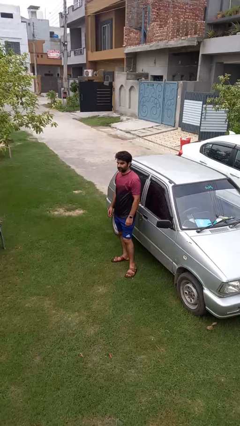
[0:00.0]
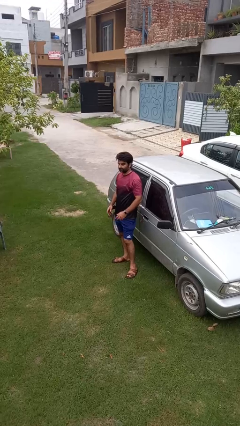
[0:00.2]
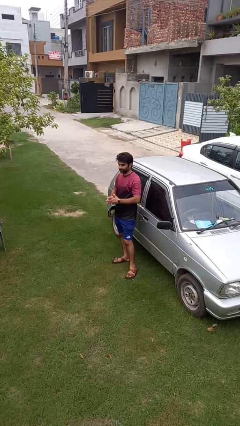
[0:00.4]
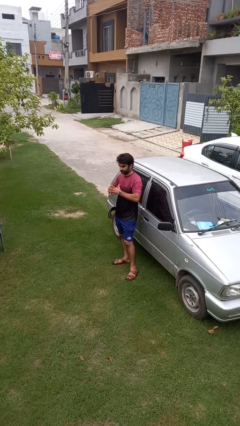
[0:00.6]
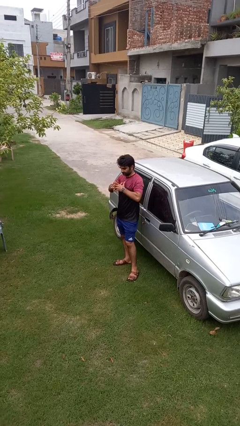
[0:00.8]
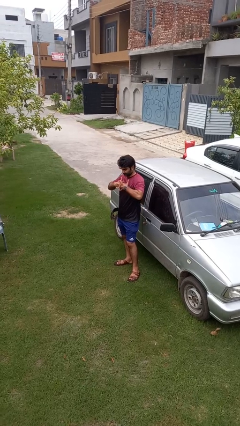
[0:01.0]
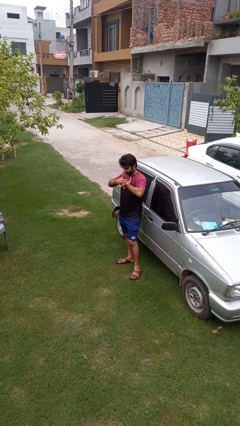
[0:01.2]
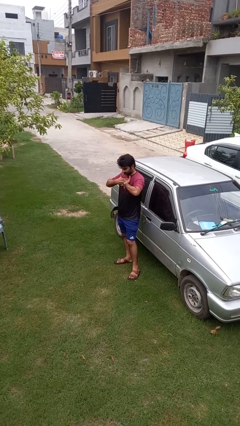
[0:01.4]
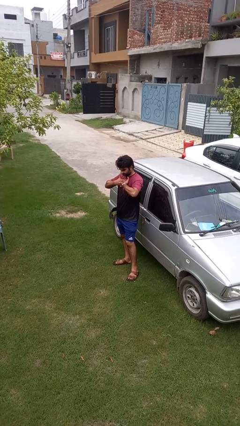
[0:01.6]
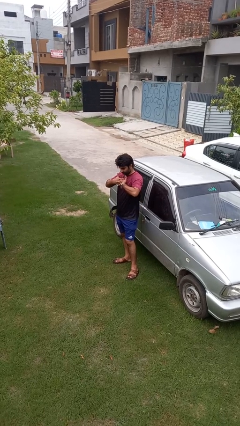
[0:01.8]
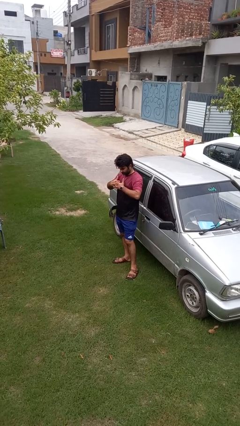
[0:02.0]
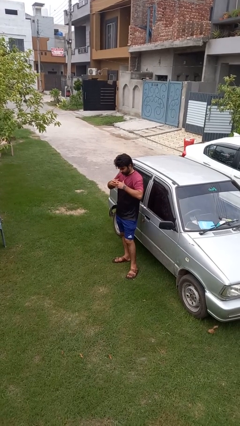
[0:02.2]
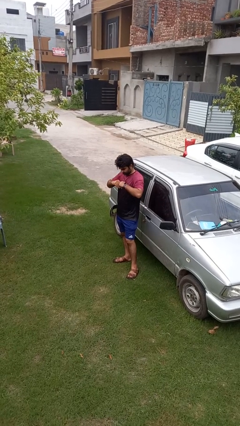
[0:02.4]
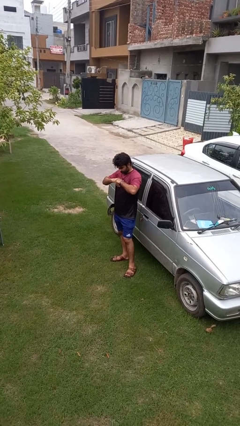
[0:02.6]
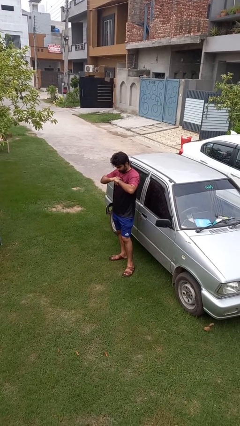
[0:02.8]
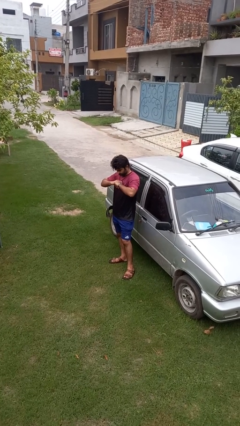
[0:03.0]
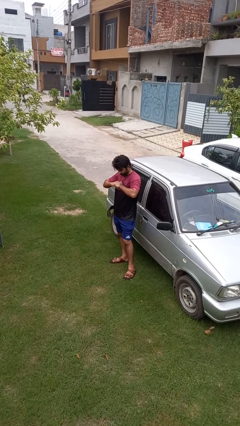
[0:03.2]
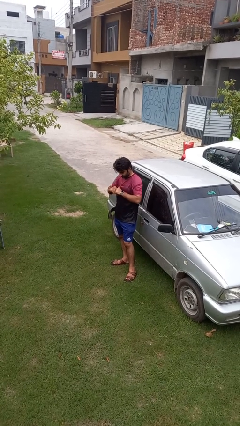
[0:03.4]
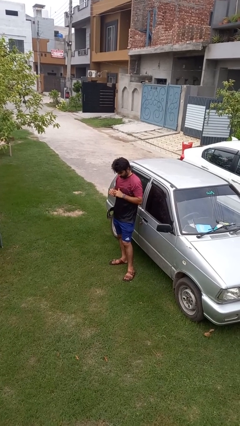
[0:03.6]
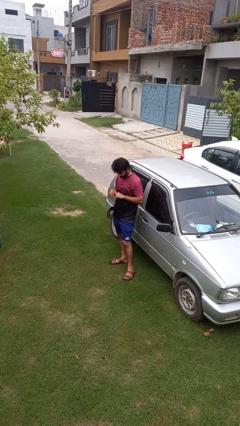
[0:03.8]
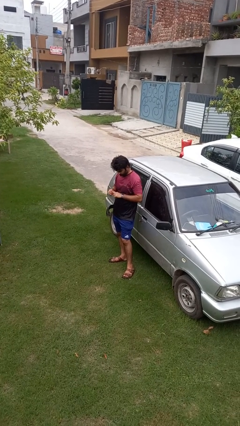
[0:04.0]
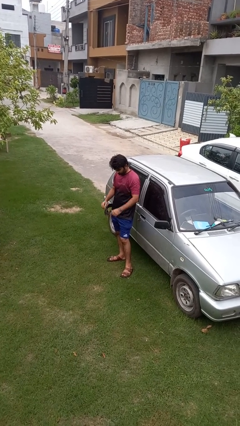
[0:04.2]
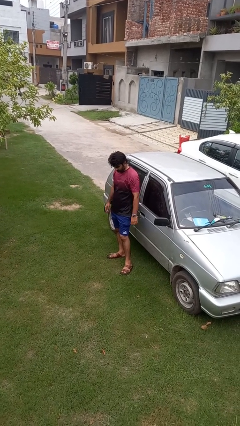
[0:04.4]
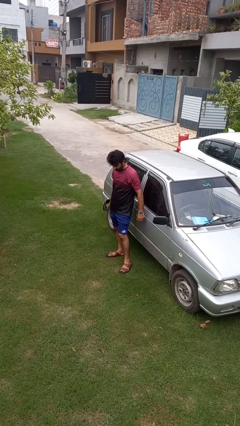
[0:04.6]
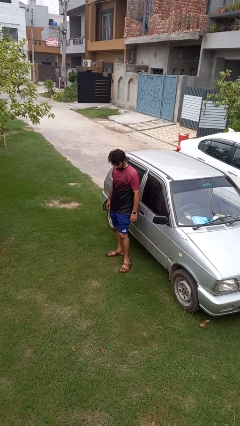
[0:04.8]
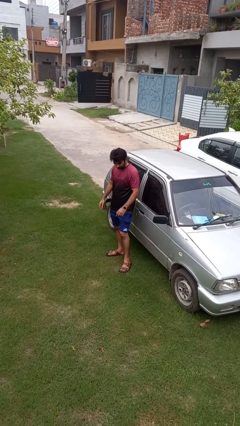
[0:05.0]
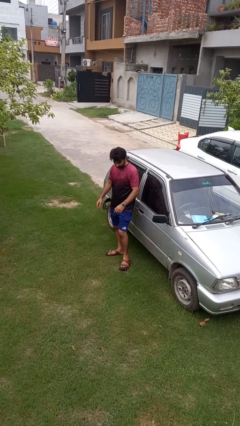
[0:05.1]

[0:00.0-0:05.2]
person cracks knuckles

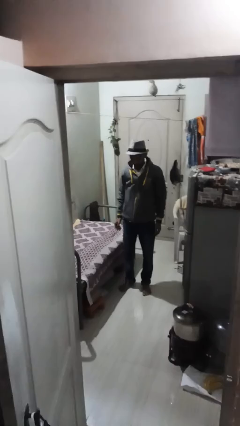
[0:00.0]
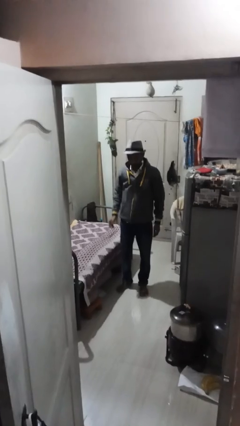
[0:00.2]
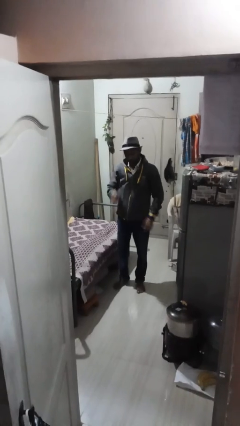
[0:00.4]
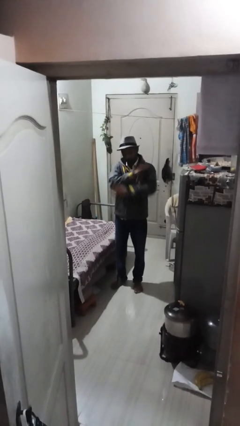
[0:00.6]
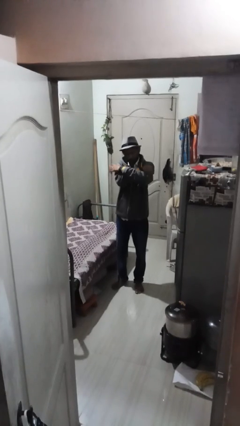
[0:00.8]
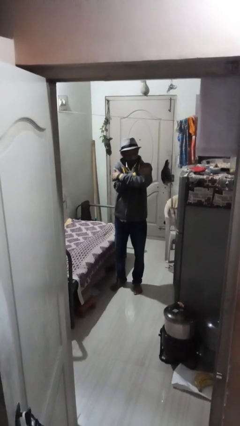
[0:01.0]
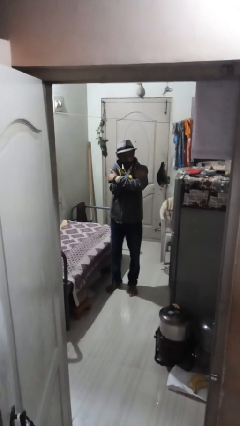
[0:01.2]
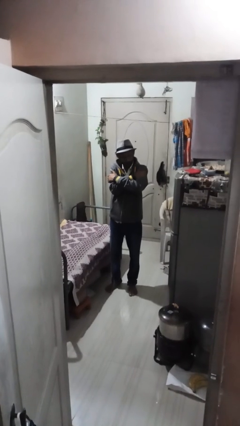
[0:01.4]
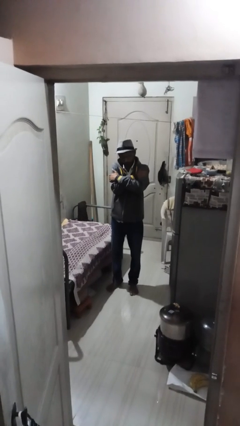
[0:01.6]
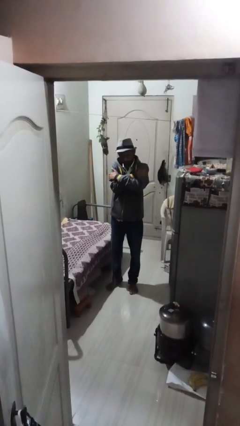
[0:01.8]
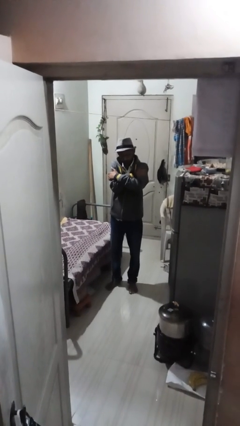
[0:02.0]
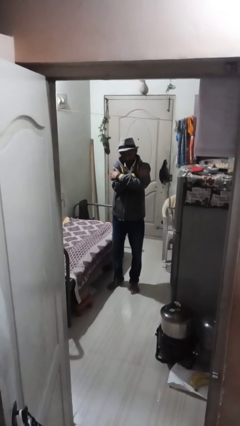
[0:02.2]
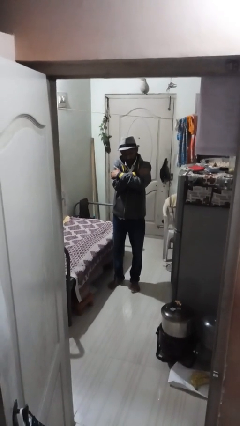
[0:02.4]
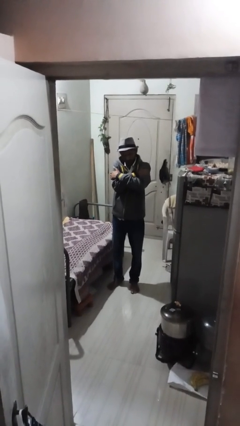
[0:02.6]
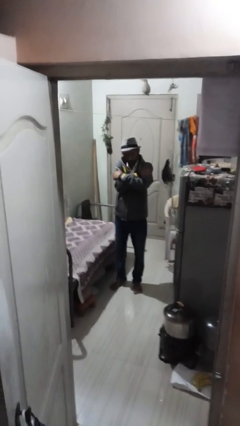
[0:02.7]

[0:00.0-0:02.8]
person crosses arms

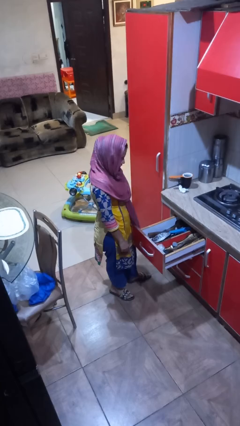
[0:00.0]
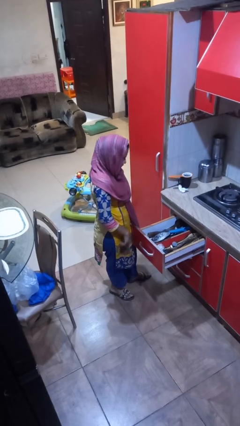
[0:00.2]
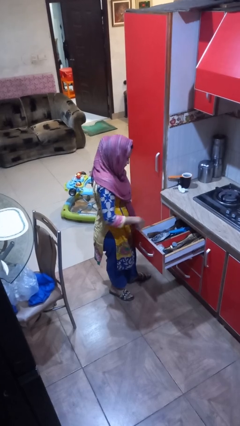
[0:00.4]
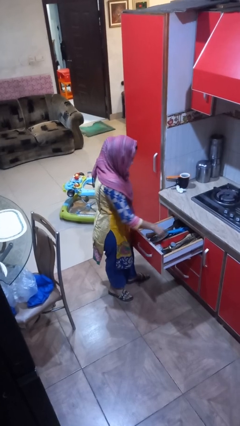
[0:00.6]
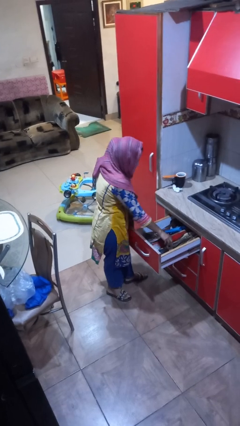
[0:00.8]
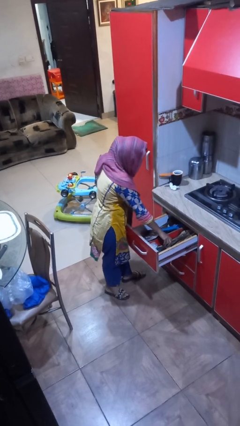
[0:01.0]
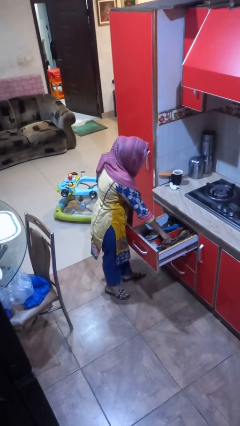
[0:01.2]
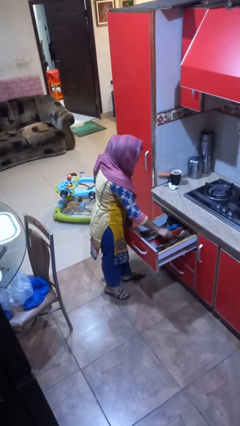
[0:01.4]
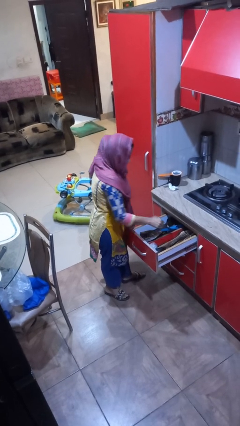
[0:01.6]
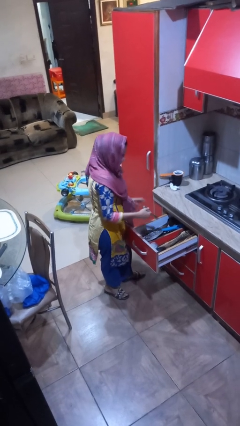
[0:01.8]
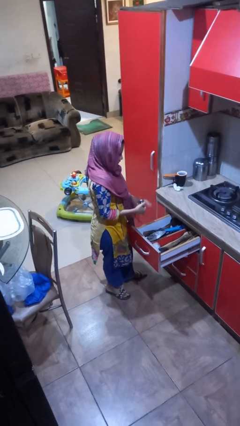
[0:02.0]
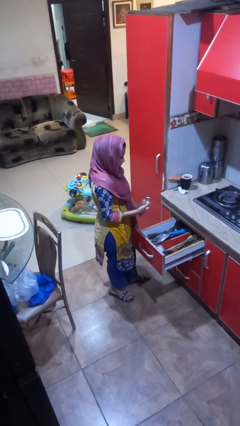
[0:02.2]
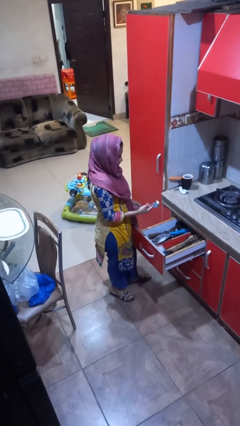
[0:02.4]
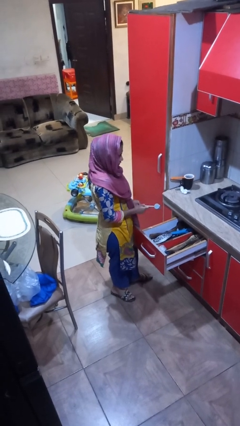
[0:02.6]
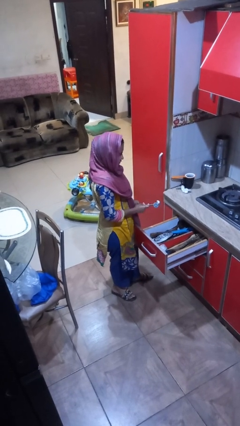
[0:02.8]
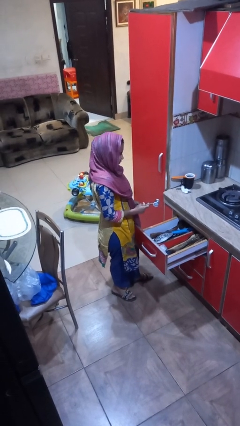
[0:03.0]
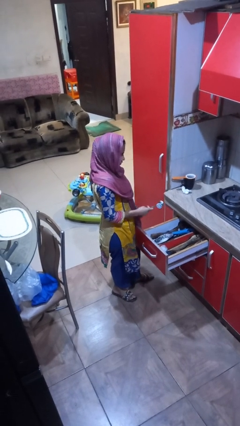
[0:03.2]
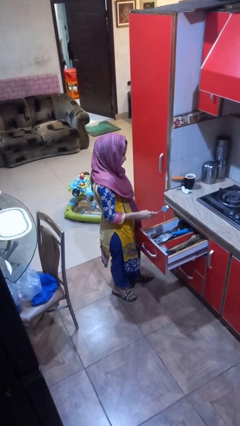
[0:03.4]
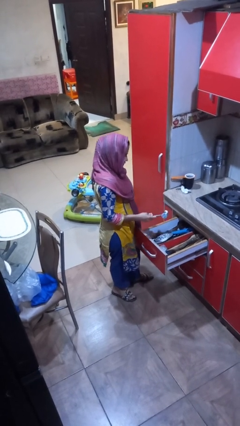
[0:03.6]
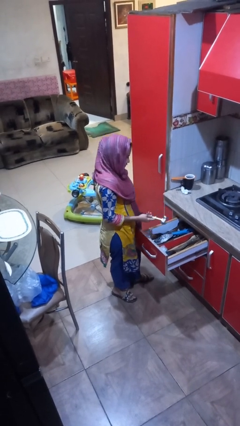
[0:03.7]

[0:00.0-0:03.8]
person takes object from kitchen drawer

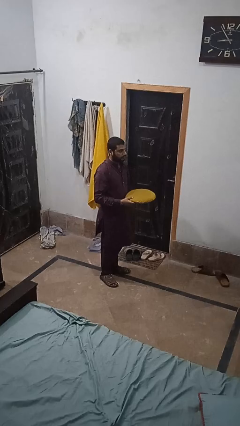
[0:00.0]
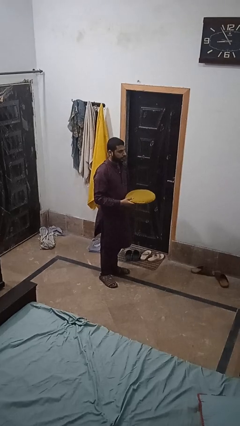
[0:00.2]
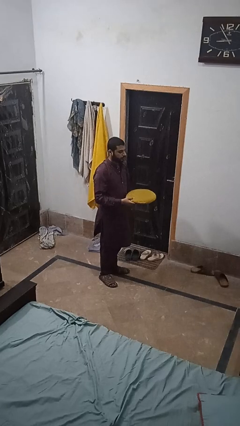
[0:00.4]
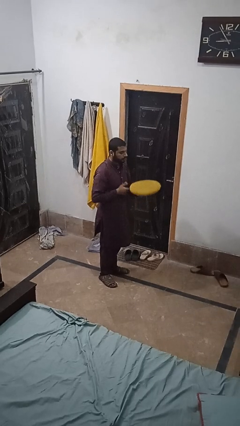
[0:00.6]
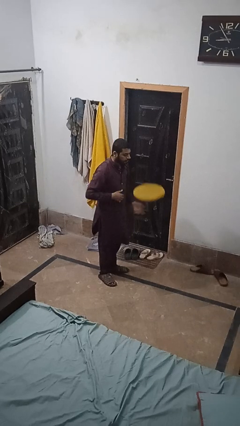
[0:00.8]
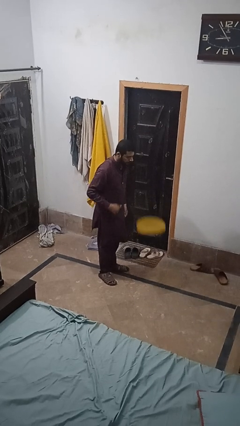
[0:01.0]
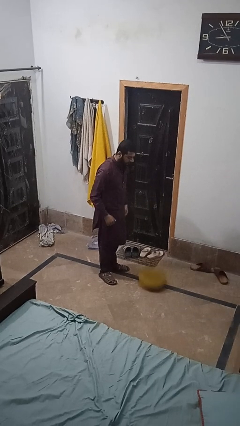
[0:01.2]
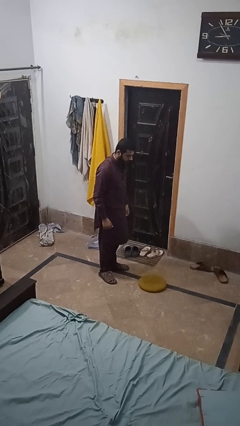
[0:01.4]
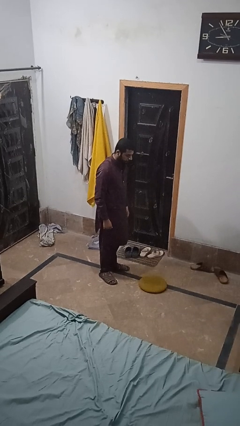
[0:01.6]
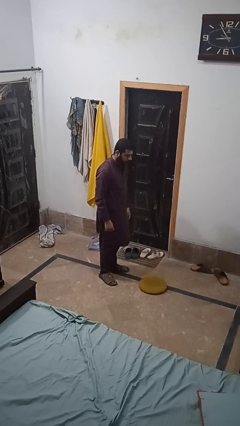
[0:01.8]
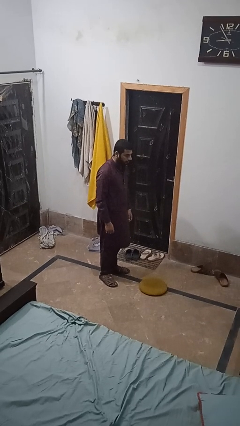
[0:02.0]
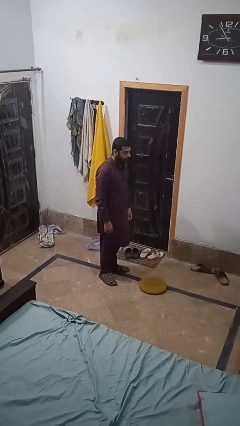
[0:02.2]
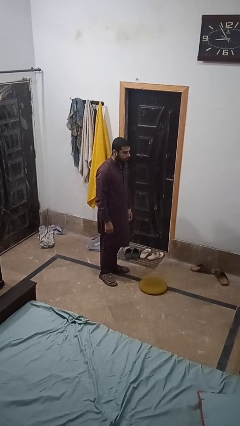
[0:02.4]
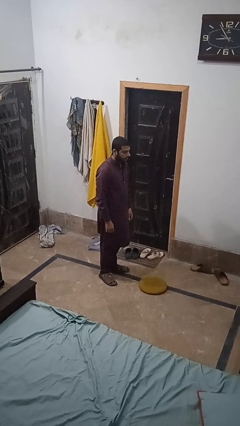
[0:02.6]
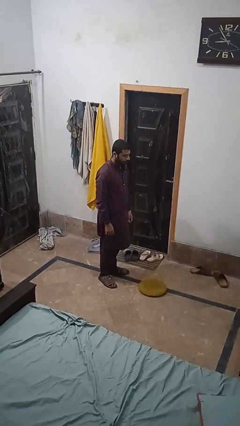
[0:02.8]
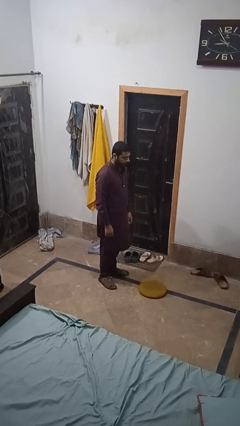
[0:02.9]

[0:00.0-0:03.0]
person throws object to ground

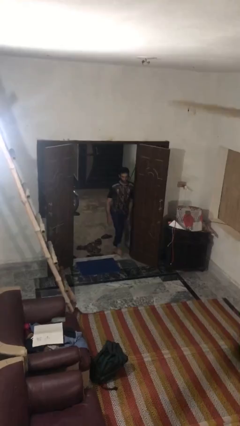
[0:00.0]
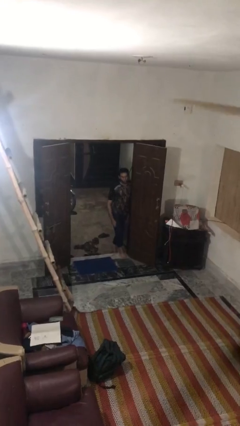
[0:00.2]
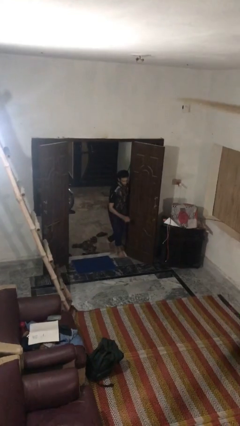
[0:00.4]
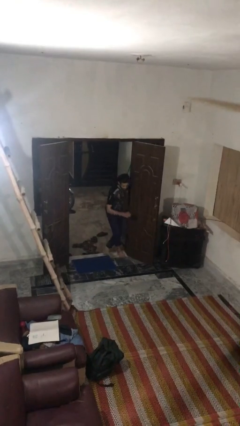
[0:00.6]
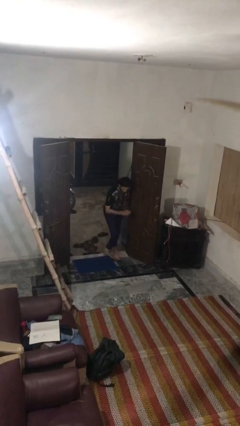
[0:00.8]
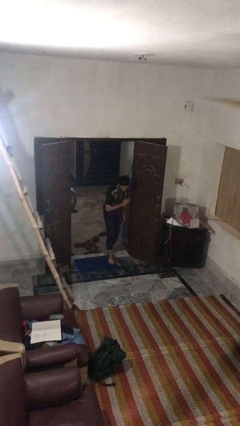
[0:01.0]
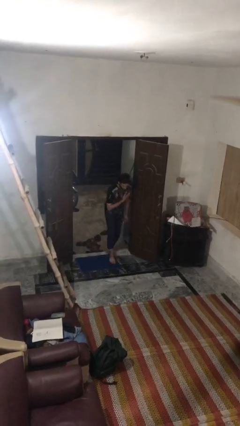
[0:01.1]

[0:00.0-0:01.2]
person bumps into wall

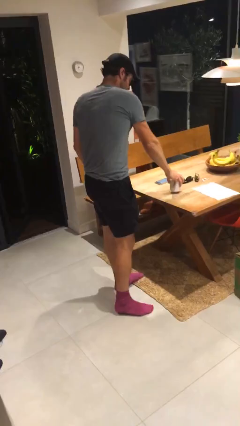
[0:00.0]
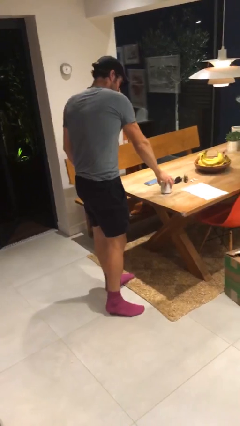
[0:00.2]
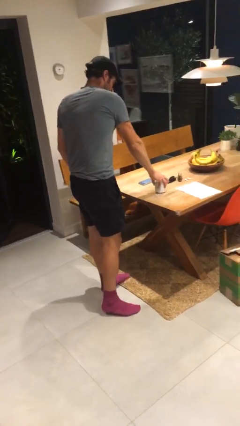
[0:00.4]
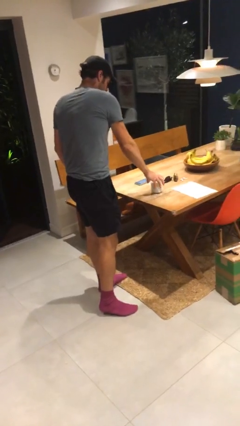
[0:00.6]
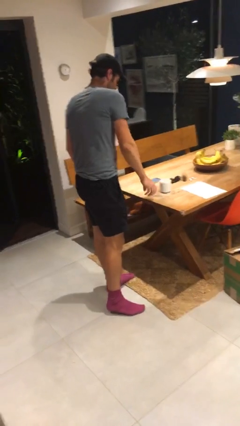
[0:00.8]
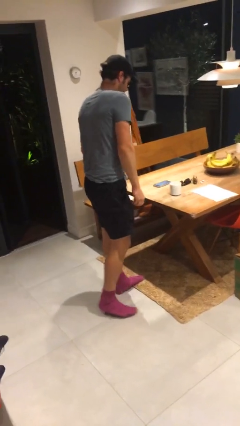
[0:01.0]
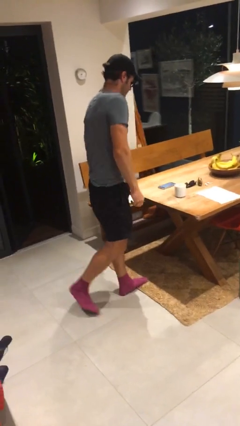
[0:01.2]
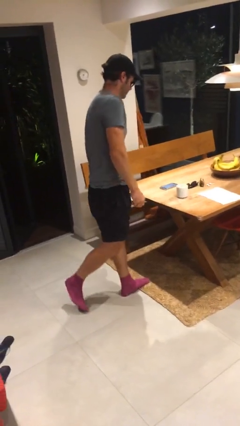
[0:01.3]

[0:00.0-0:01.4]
person puts down object on table
